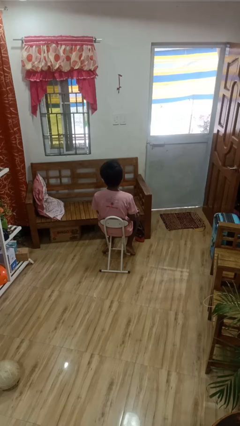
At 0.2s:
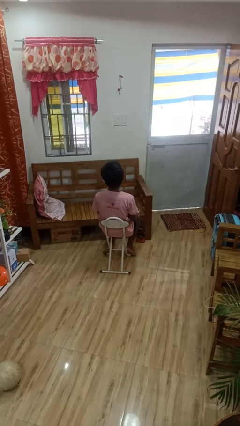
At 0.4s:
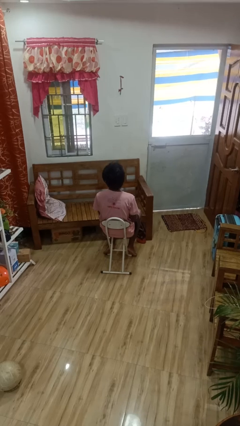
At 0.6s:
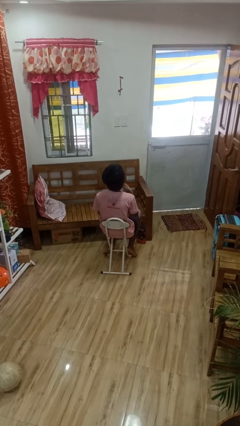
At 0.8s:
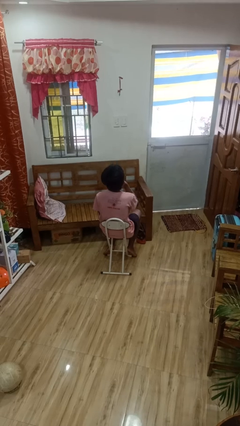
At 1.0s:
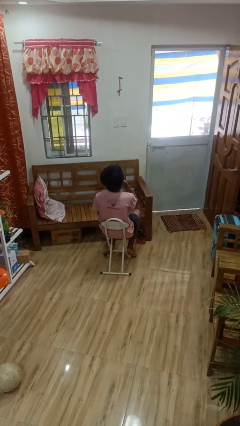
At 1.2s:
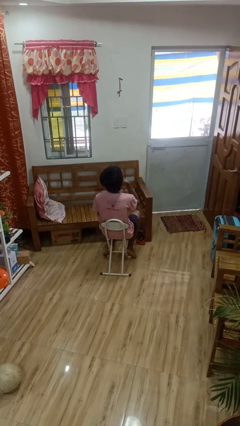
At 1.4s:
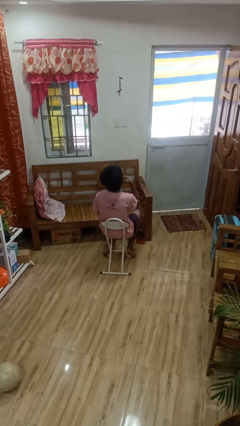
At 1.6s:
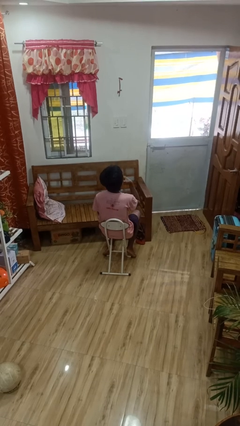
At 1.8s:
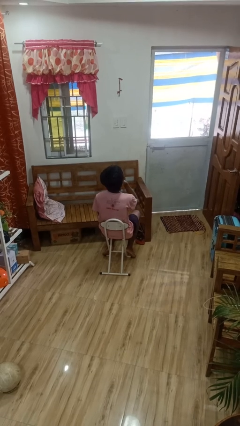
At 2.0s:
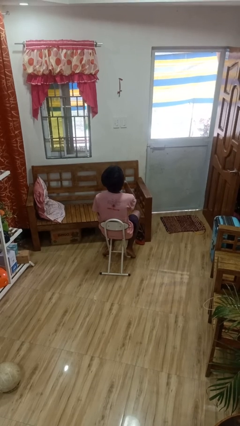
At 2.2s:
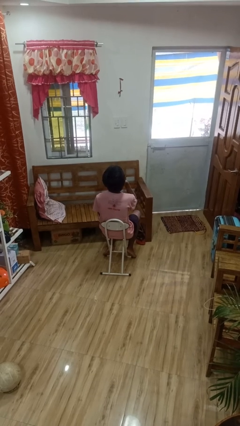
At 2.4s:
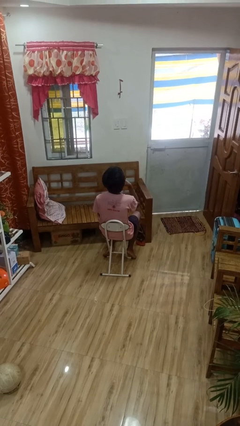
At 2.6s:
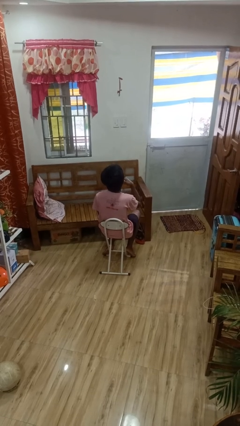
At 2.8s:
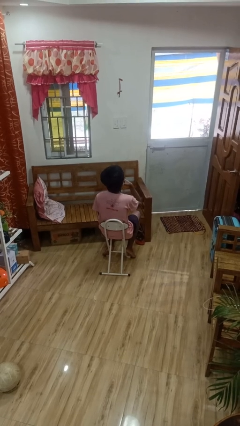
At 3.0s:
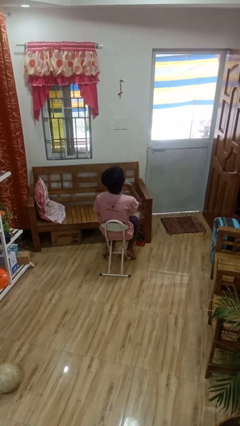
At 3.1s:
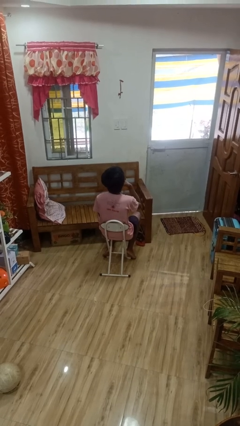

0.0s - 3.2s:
person strokes chin

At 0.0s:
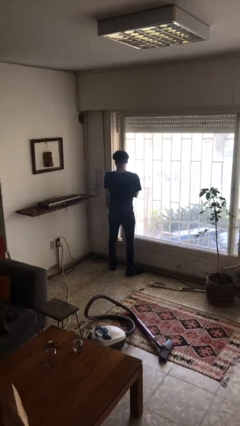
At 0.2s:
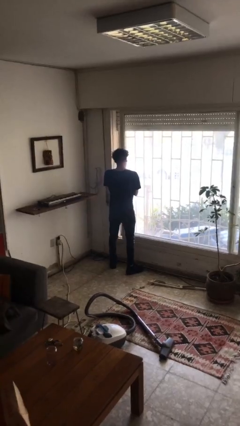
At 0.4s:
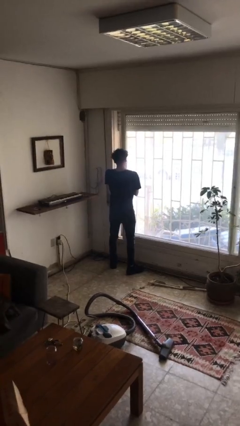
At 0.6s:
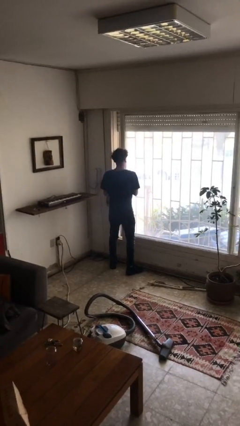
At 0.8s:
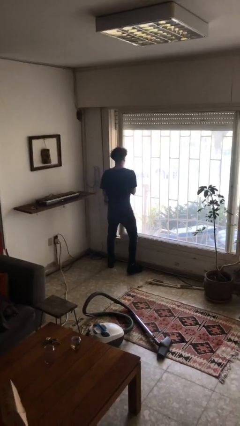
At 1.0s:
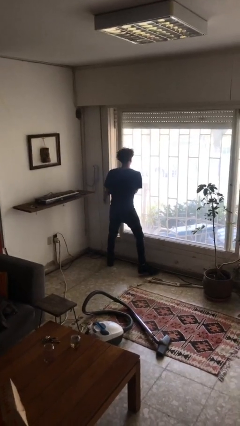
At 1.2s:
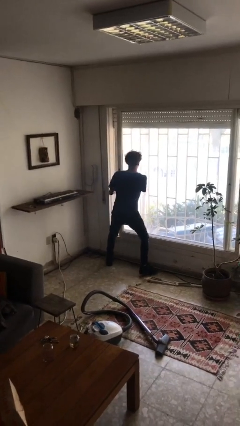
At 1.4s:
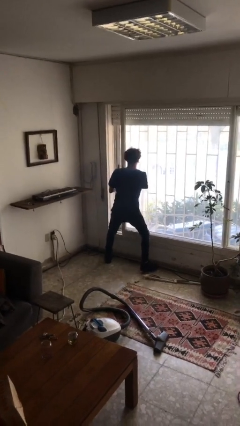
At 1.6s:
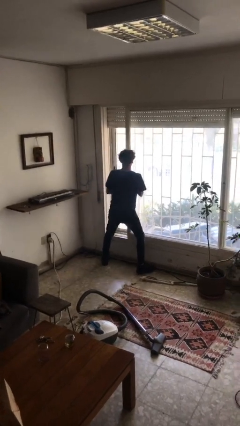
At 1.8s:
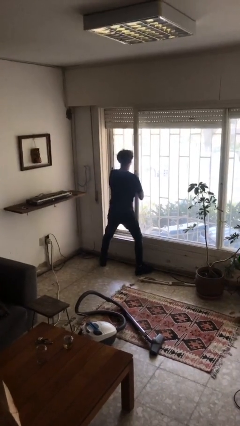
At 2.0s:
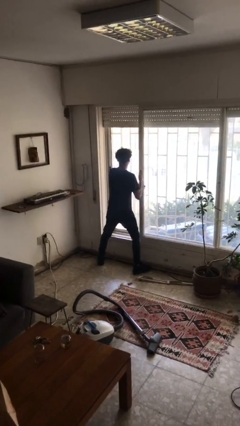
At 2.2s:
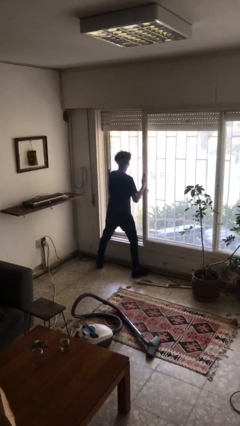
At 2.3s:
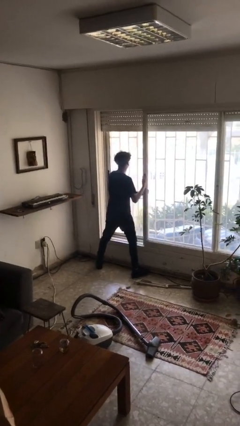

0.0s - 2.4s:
person opens sliding door

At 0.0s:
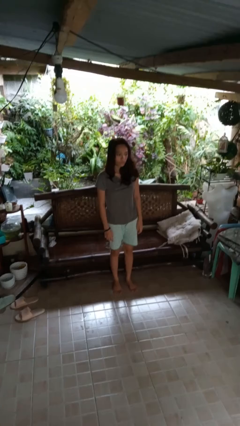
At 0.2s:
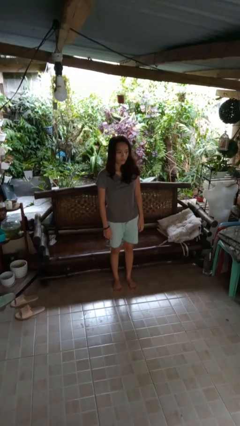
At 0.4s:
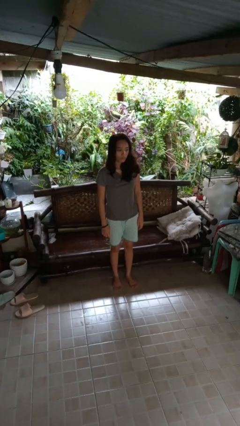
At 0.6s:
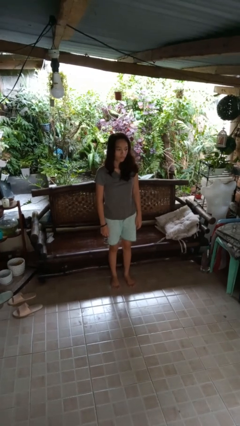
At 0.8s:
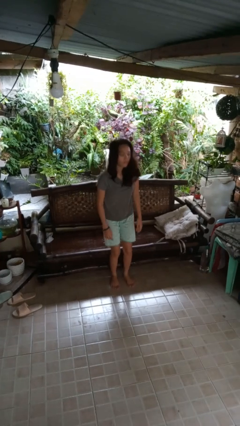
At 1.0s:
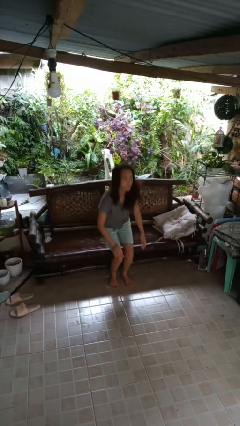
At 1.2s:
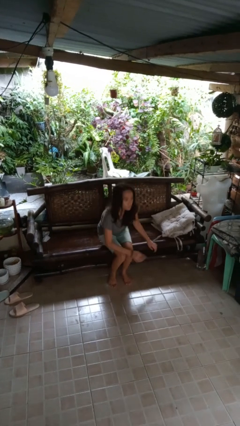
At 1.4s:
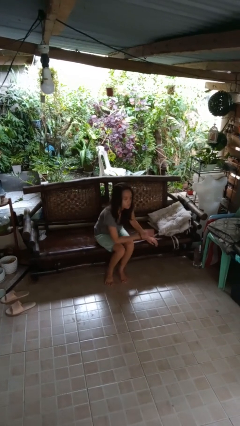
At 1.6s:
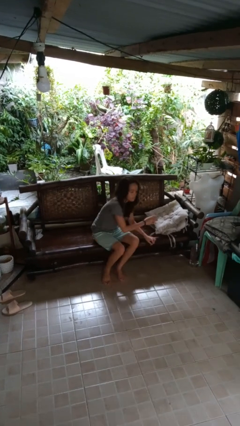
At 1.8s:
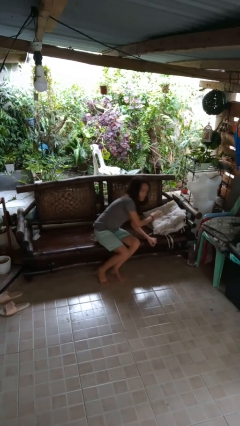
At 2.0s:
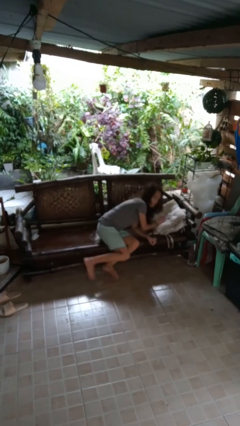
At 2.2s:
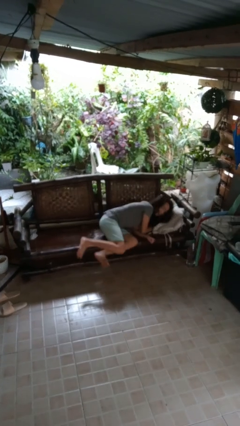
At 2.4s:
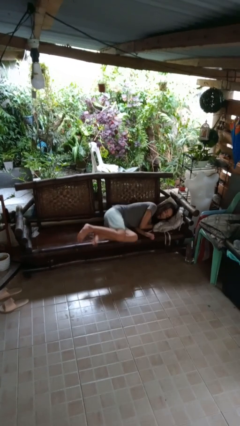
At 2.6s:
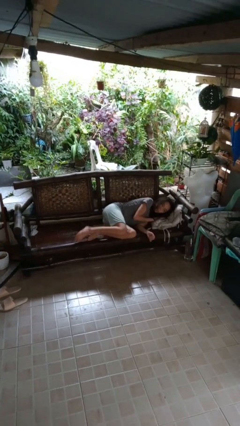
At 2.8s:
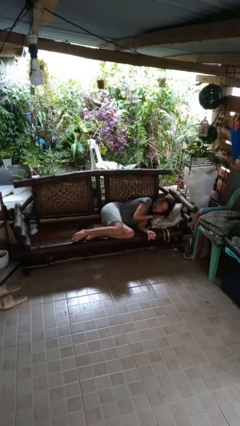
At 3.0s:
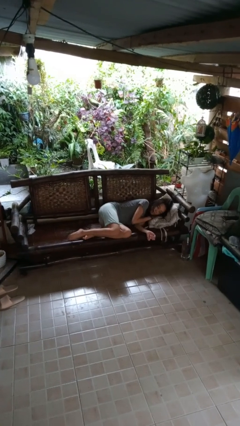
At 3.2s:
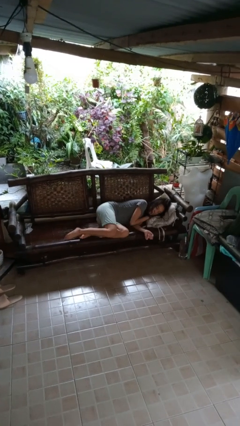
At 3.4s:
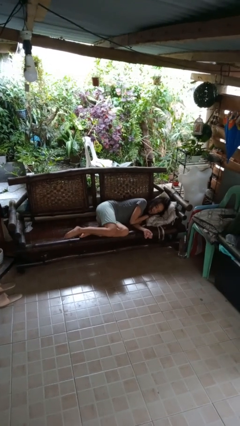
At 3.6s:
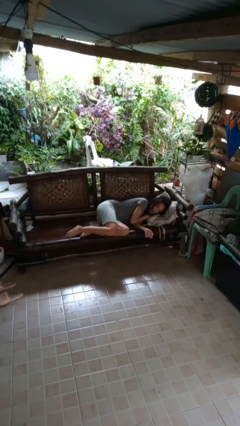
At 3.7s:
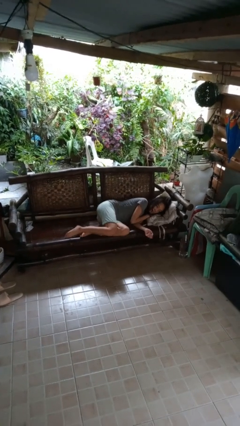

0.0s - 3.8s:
person lies down on couch

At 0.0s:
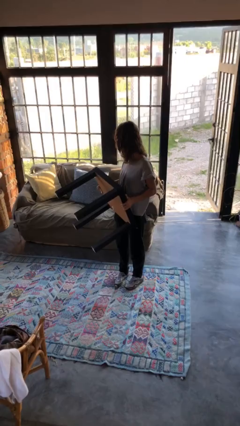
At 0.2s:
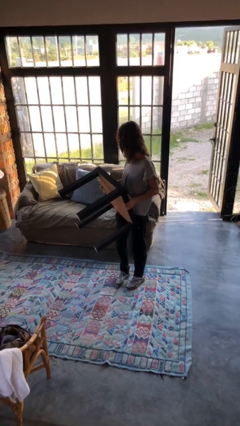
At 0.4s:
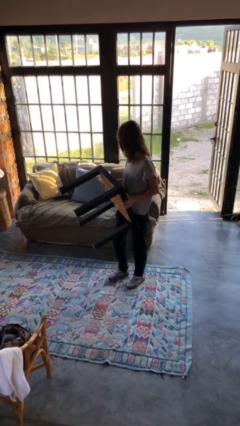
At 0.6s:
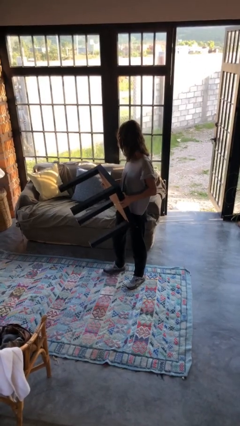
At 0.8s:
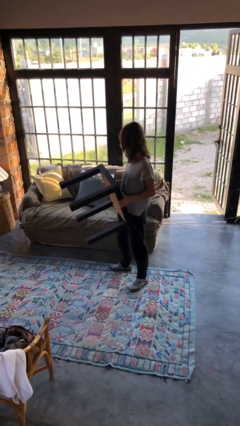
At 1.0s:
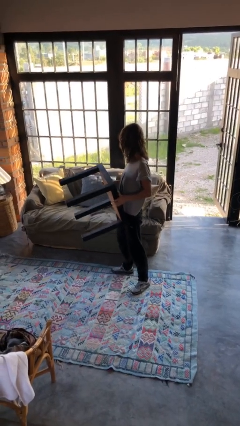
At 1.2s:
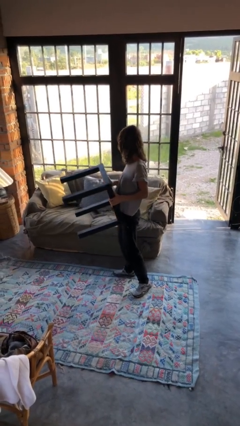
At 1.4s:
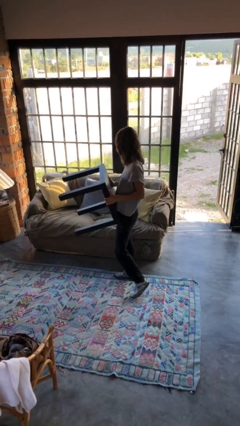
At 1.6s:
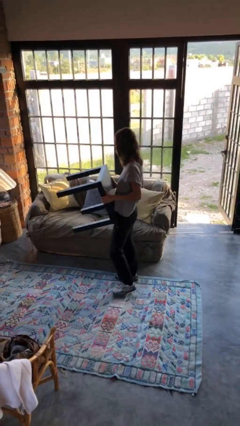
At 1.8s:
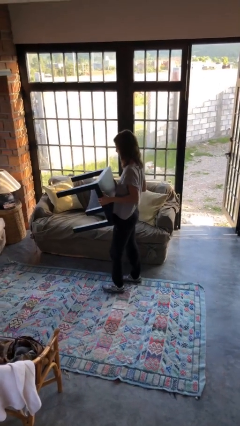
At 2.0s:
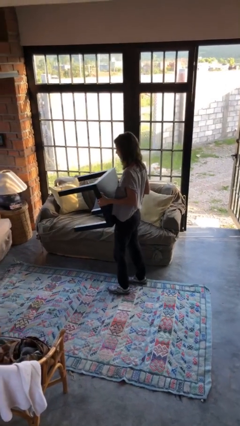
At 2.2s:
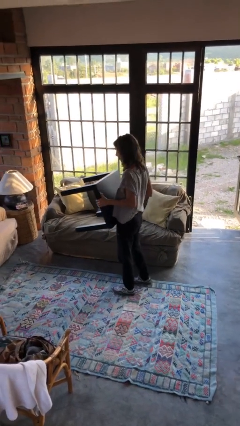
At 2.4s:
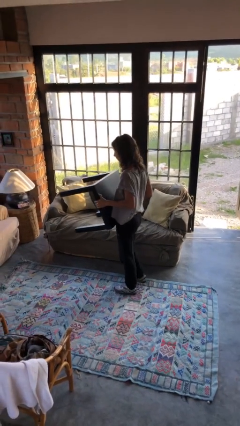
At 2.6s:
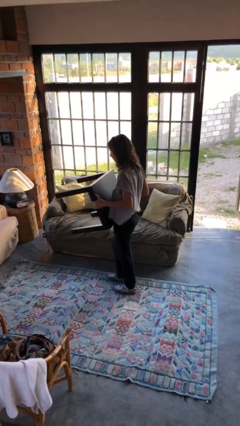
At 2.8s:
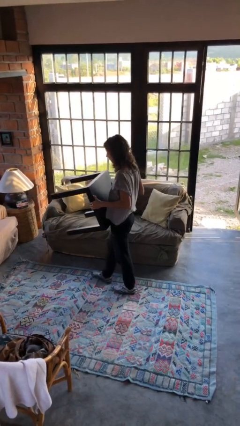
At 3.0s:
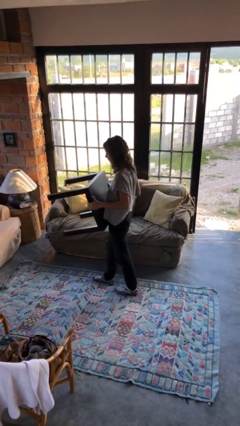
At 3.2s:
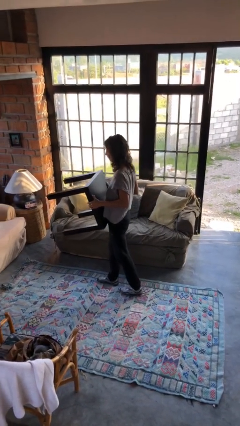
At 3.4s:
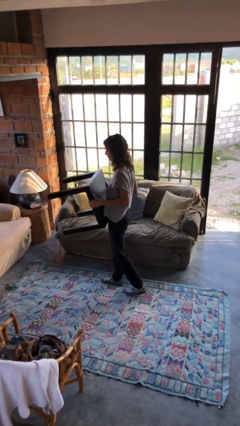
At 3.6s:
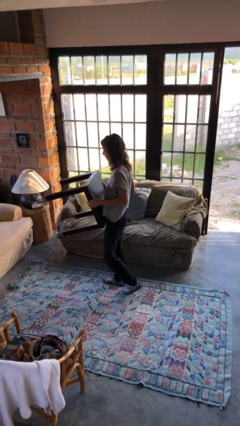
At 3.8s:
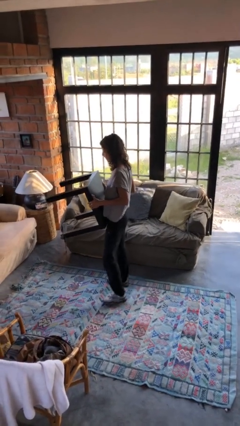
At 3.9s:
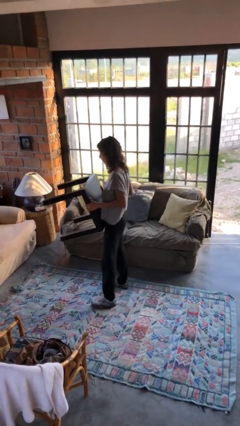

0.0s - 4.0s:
person carries furniture

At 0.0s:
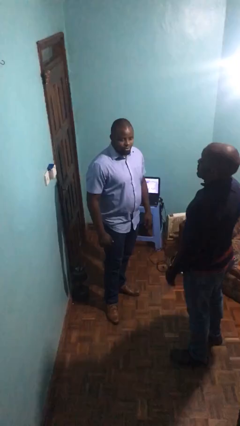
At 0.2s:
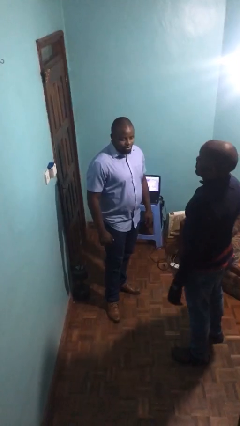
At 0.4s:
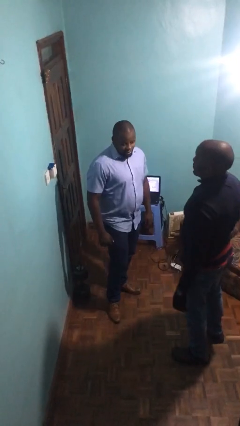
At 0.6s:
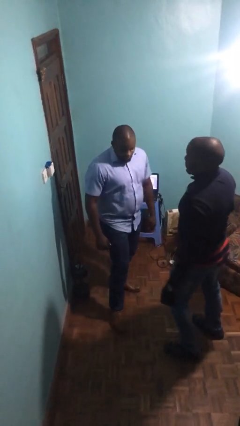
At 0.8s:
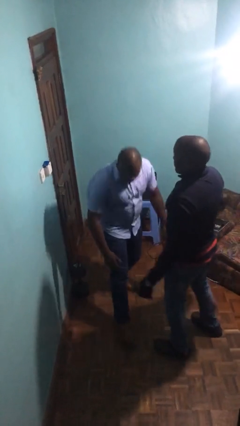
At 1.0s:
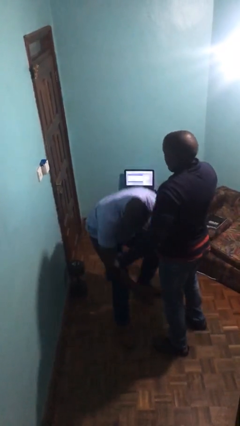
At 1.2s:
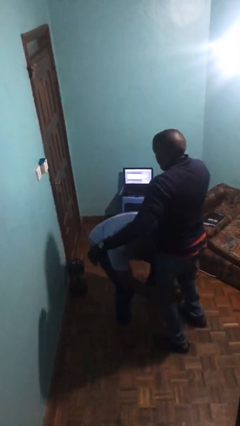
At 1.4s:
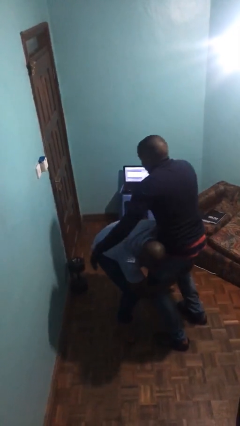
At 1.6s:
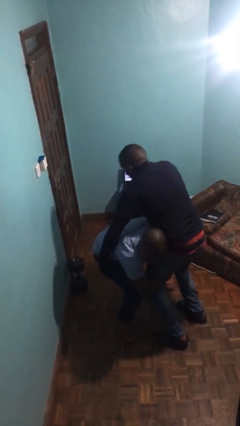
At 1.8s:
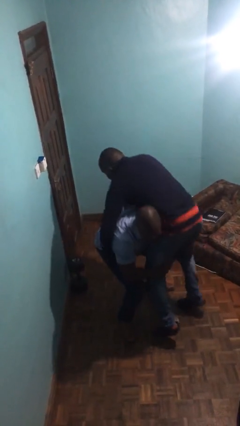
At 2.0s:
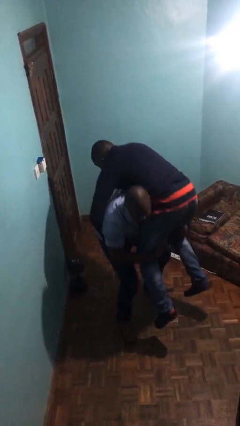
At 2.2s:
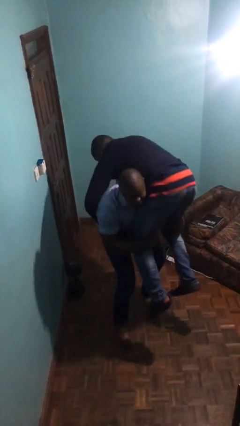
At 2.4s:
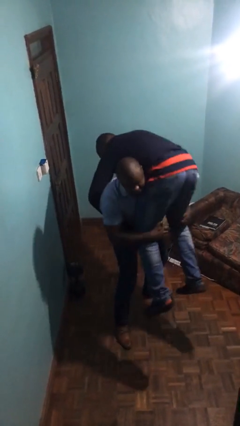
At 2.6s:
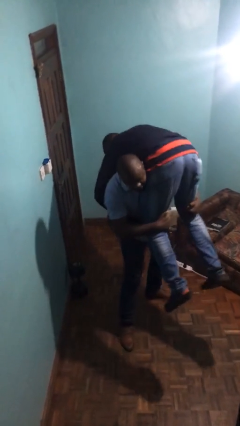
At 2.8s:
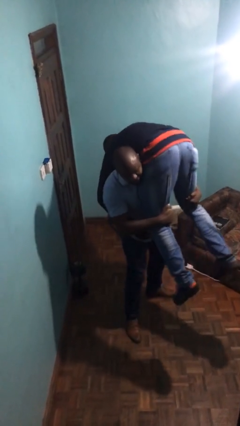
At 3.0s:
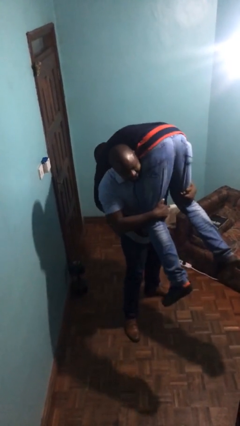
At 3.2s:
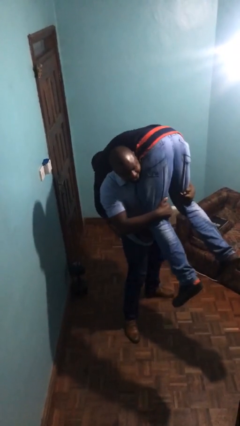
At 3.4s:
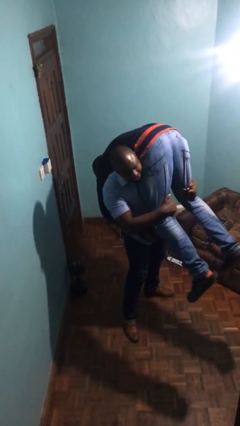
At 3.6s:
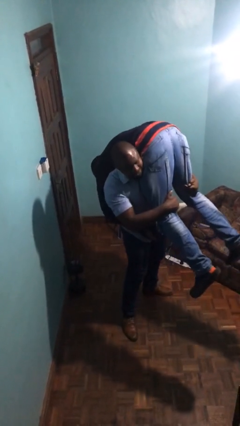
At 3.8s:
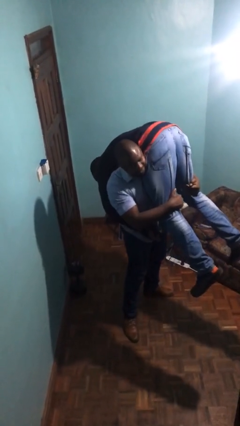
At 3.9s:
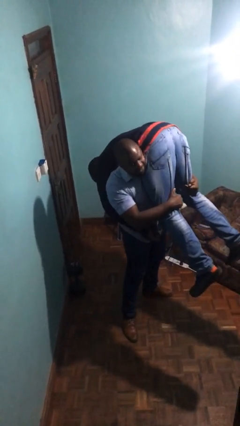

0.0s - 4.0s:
person carries person over shoulder

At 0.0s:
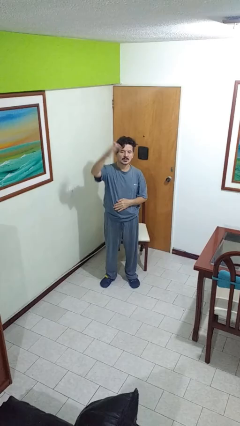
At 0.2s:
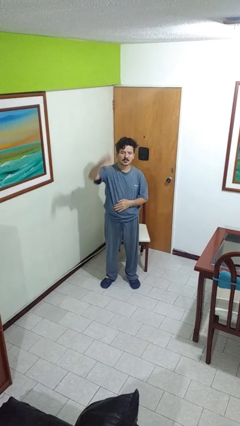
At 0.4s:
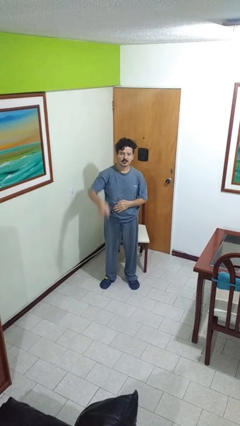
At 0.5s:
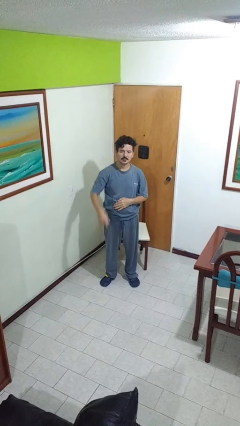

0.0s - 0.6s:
person gestures blow kiss
